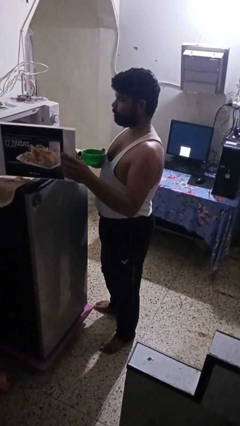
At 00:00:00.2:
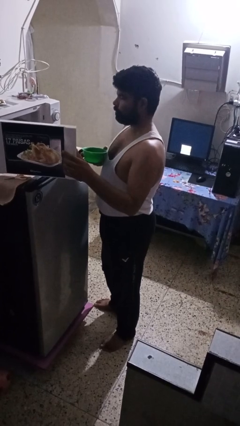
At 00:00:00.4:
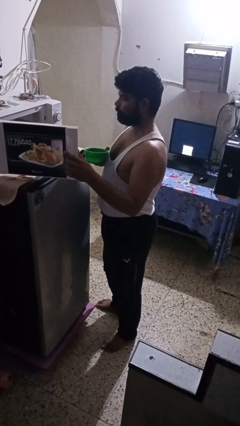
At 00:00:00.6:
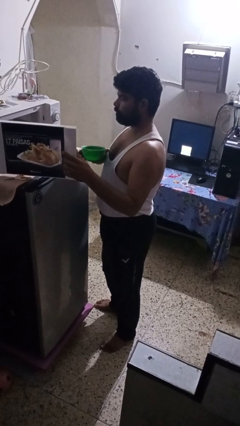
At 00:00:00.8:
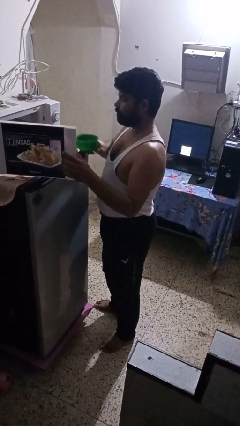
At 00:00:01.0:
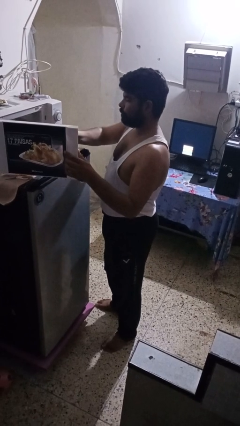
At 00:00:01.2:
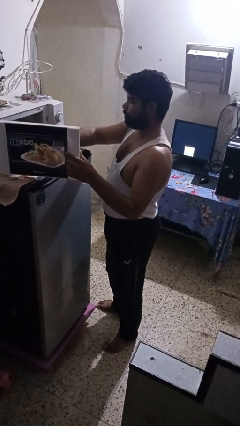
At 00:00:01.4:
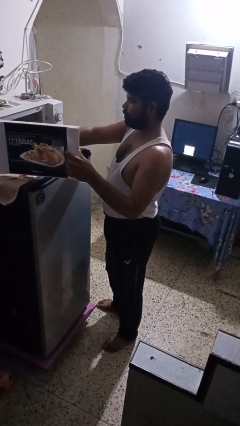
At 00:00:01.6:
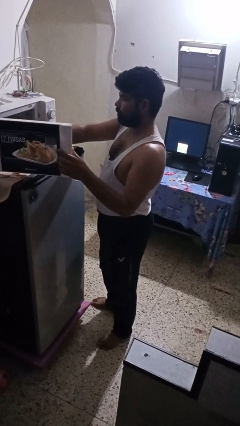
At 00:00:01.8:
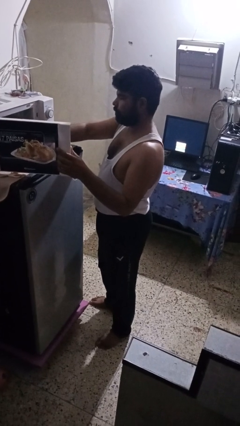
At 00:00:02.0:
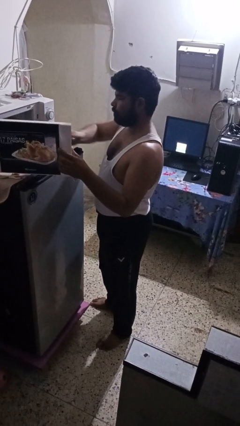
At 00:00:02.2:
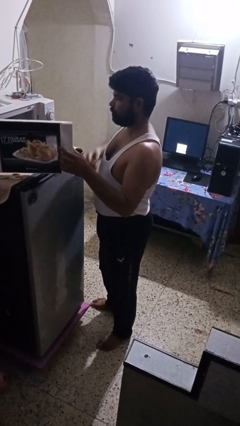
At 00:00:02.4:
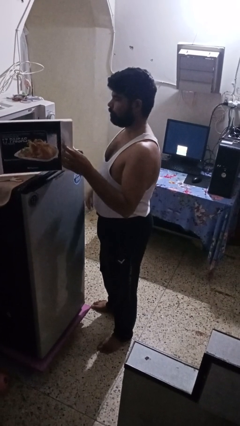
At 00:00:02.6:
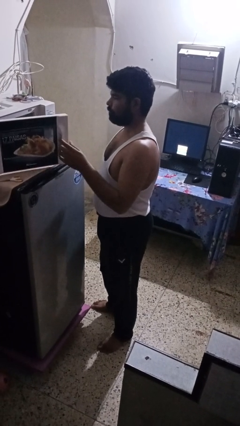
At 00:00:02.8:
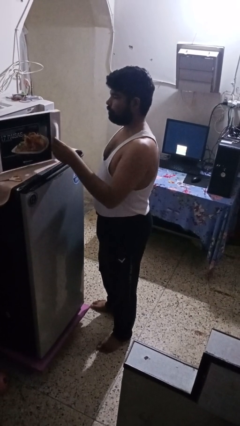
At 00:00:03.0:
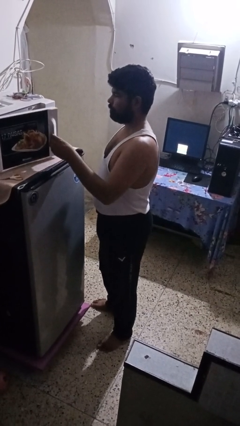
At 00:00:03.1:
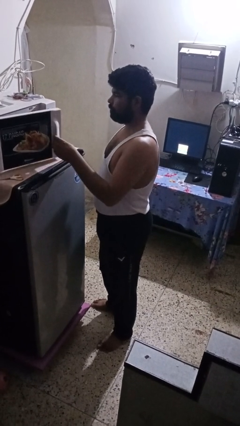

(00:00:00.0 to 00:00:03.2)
person puts object into microwave

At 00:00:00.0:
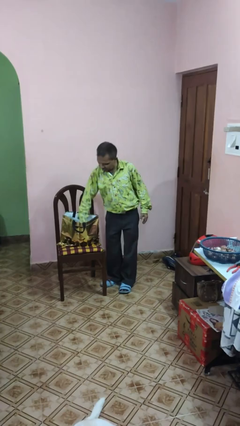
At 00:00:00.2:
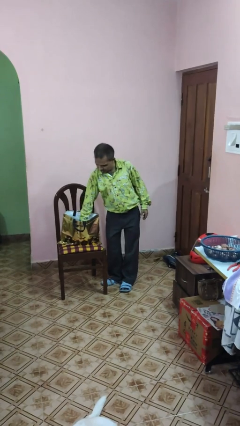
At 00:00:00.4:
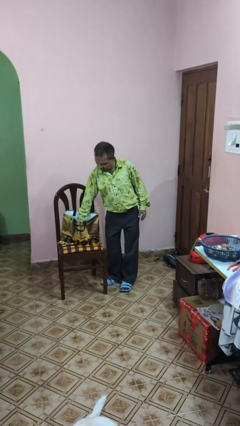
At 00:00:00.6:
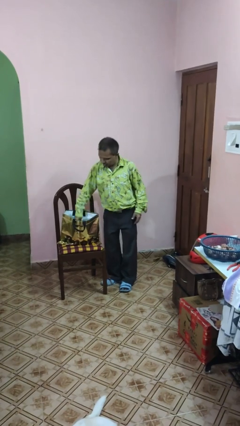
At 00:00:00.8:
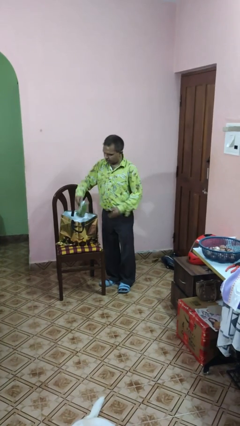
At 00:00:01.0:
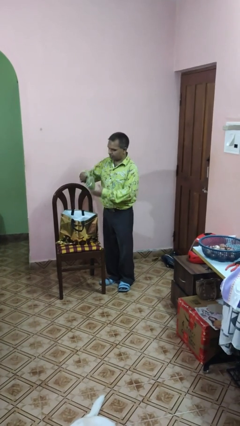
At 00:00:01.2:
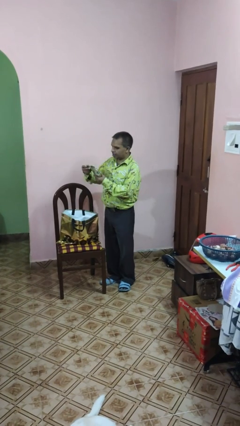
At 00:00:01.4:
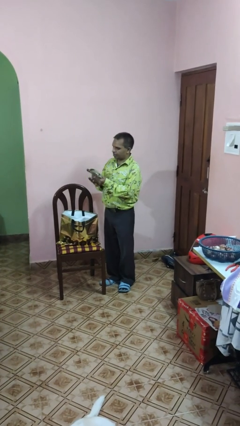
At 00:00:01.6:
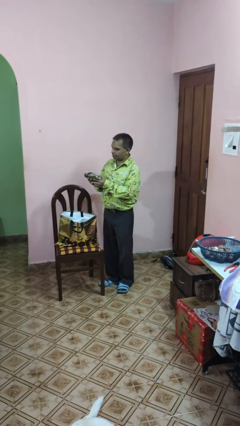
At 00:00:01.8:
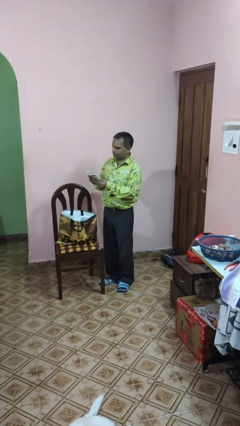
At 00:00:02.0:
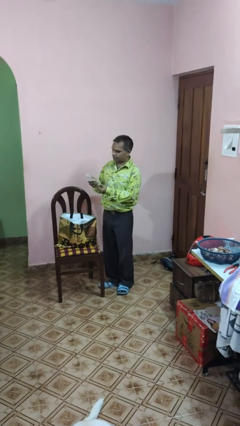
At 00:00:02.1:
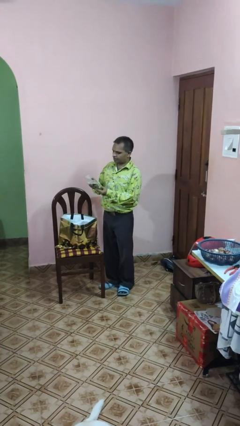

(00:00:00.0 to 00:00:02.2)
person takes object from bag

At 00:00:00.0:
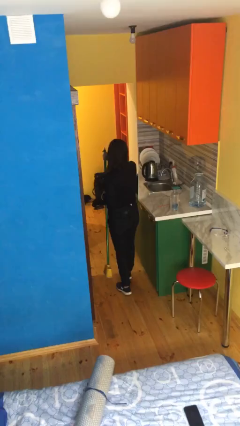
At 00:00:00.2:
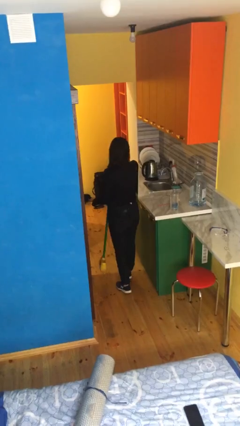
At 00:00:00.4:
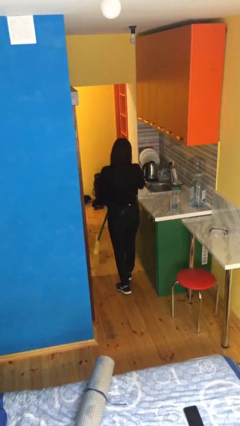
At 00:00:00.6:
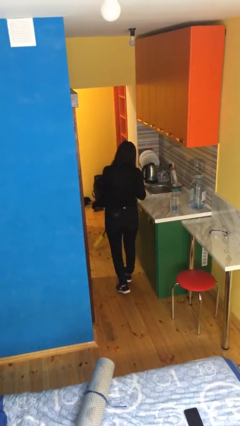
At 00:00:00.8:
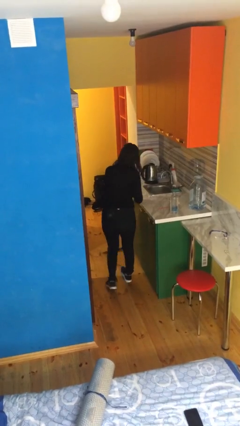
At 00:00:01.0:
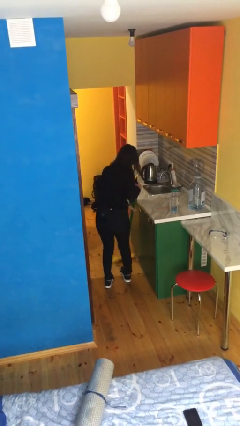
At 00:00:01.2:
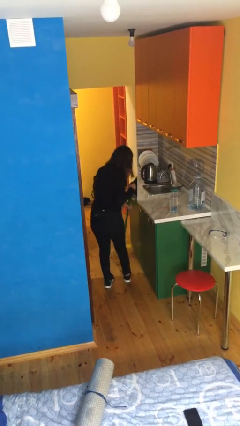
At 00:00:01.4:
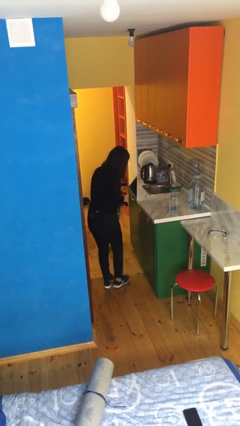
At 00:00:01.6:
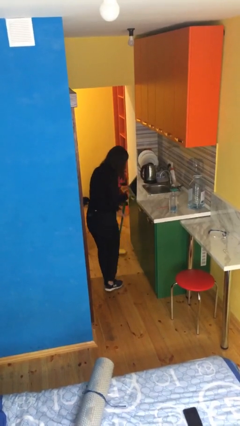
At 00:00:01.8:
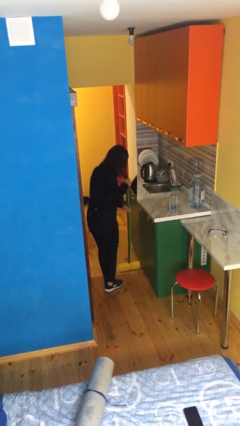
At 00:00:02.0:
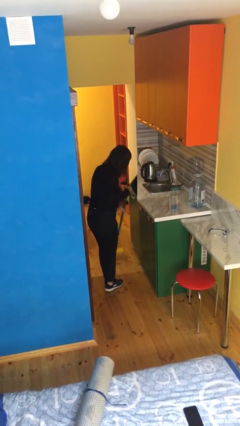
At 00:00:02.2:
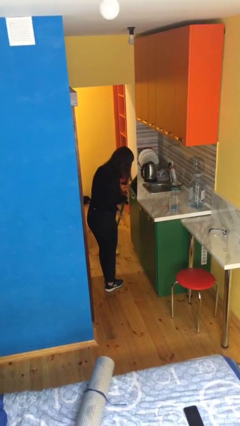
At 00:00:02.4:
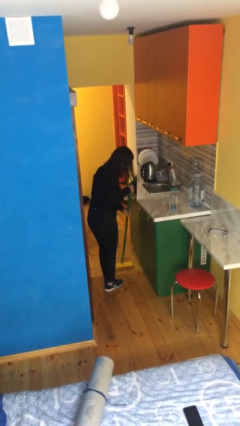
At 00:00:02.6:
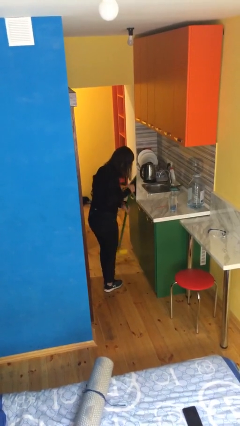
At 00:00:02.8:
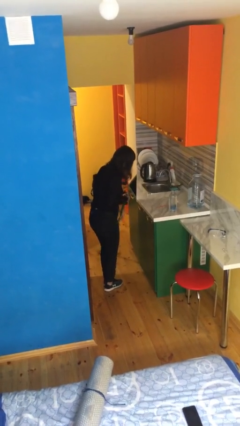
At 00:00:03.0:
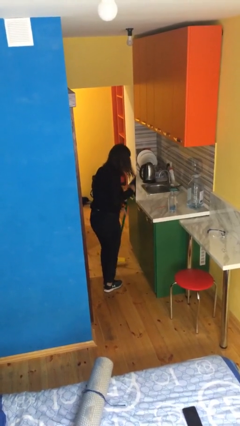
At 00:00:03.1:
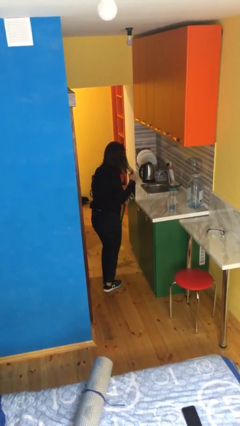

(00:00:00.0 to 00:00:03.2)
person sweeps floor

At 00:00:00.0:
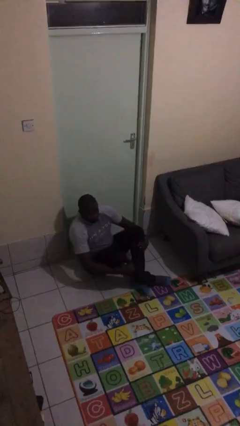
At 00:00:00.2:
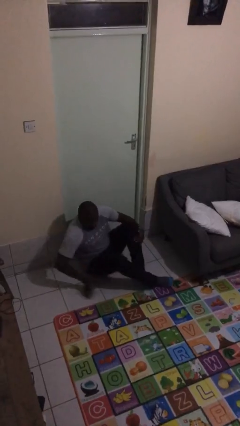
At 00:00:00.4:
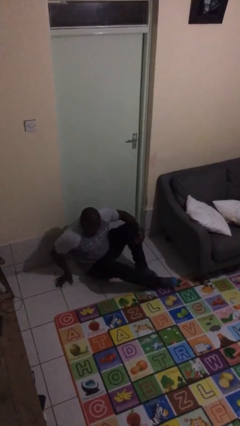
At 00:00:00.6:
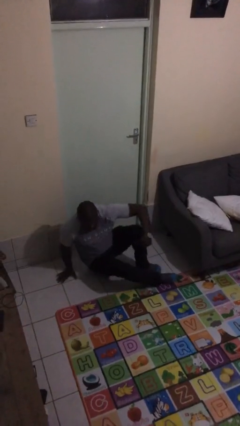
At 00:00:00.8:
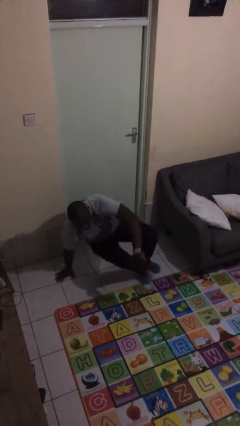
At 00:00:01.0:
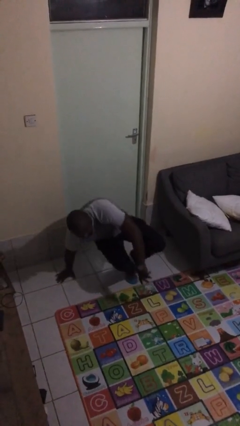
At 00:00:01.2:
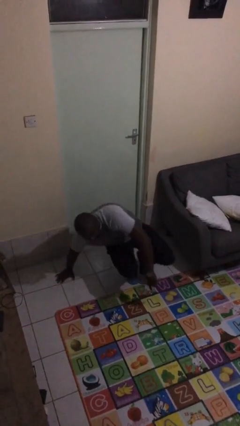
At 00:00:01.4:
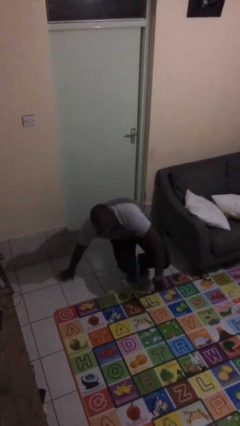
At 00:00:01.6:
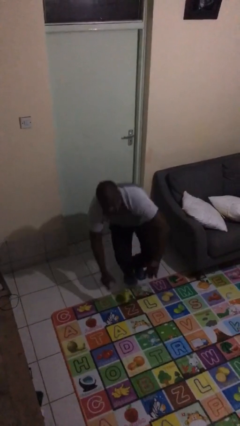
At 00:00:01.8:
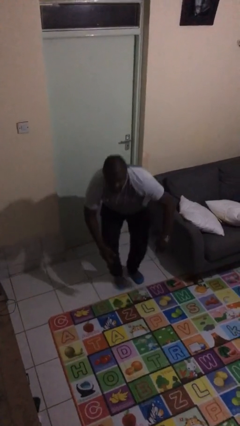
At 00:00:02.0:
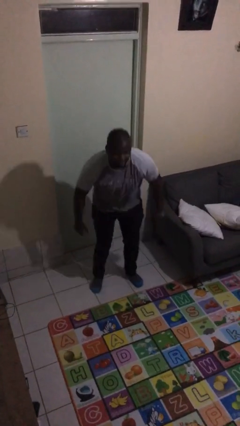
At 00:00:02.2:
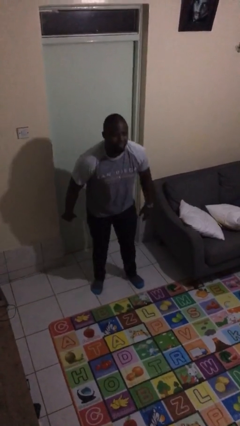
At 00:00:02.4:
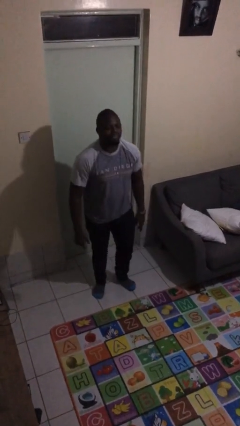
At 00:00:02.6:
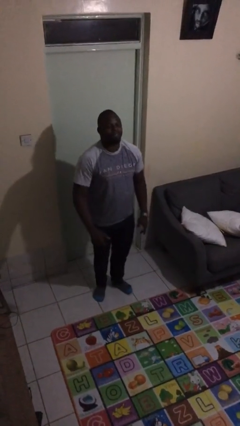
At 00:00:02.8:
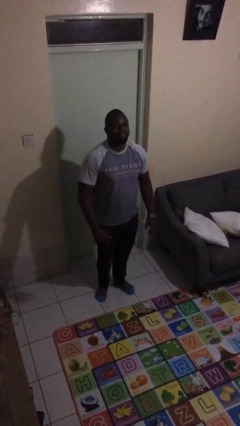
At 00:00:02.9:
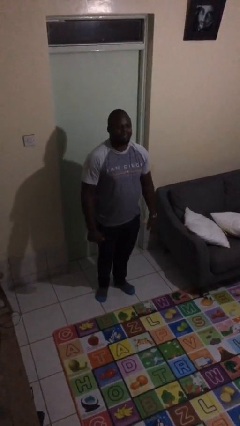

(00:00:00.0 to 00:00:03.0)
person stands up from floor

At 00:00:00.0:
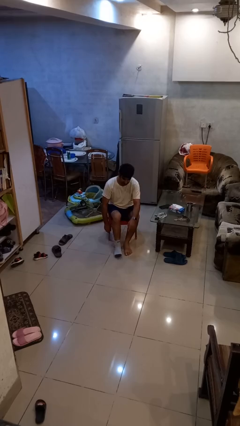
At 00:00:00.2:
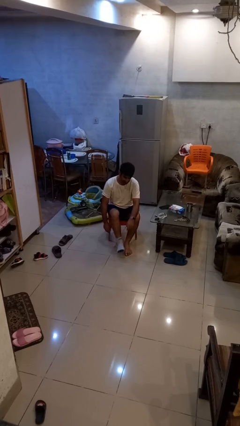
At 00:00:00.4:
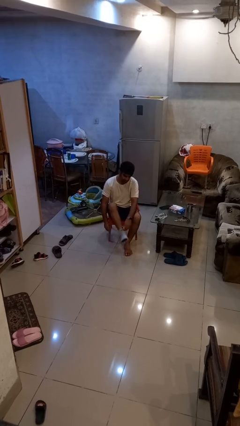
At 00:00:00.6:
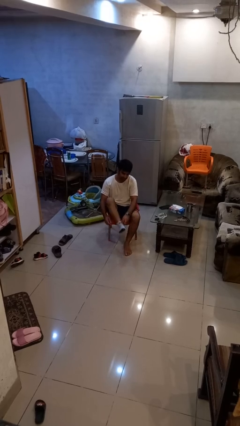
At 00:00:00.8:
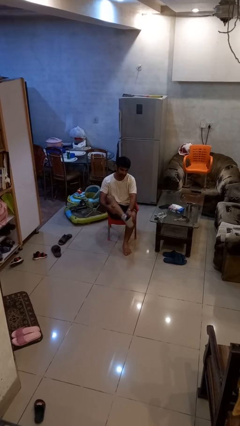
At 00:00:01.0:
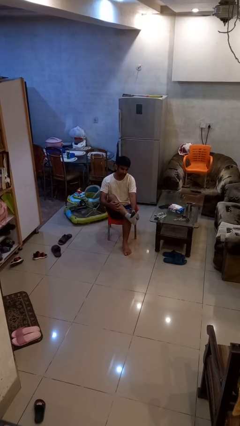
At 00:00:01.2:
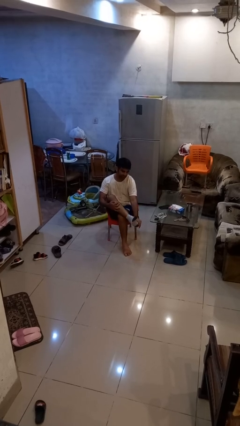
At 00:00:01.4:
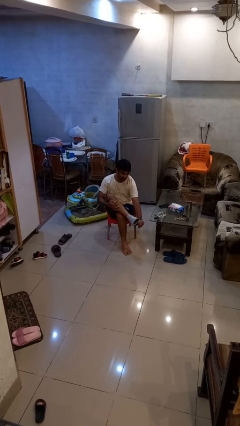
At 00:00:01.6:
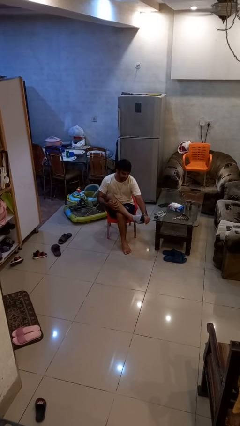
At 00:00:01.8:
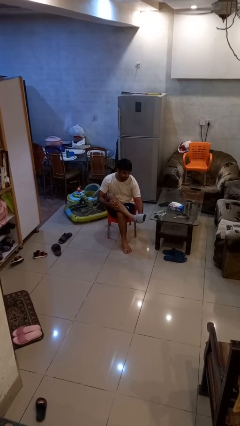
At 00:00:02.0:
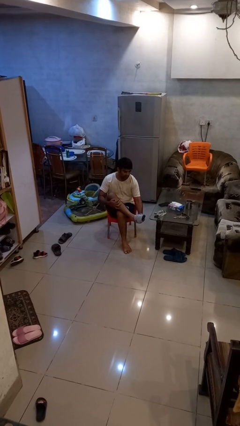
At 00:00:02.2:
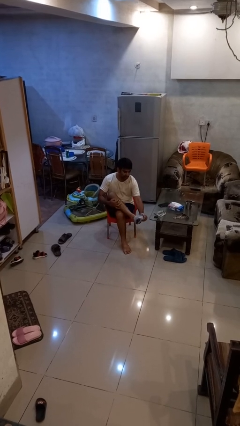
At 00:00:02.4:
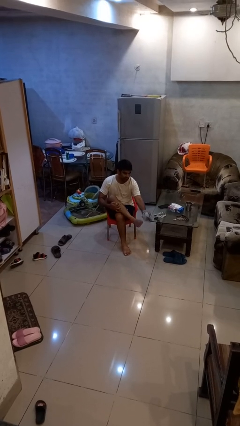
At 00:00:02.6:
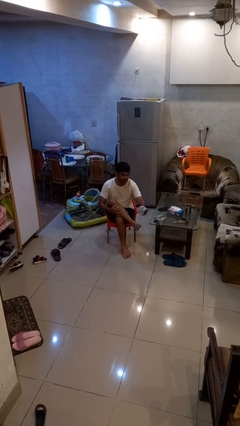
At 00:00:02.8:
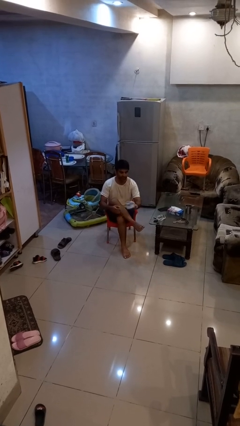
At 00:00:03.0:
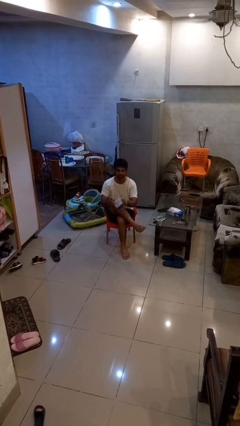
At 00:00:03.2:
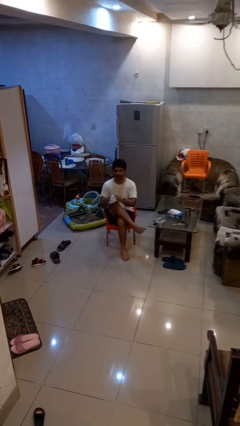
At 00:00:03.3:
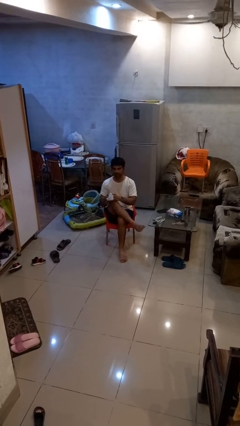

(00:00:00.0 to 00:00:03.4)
person takes off socks

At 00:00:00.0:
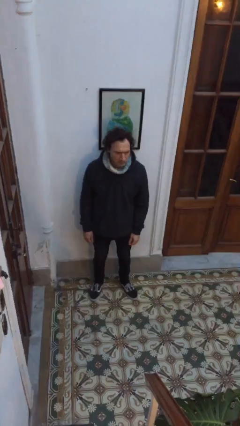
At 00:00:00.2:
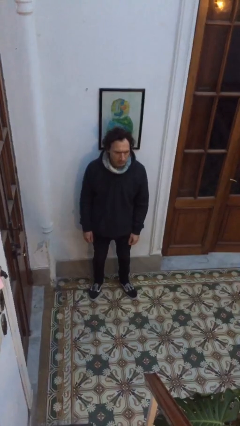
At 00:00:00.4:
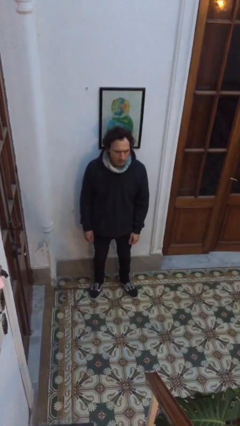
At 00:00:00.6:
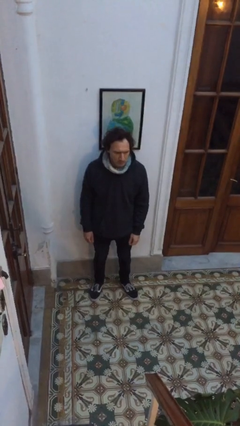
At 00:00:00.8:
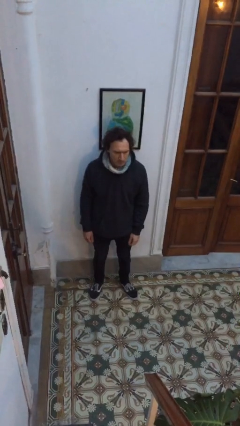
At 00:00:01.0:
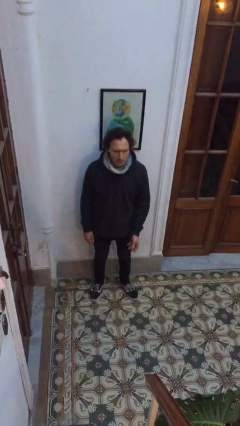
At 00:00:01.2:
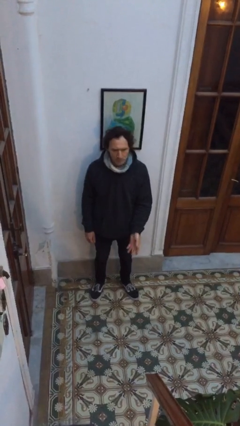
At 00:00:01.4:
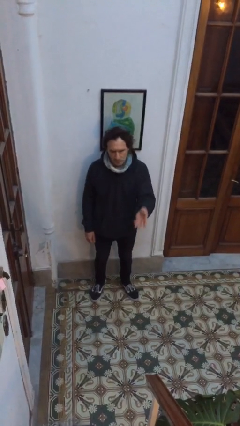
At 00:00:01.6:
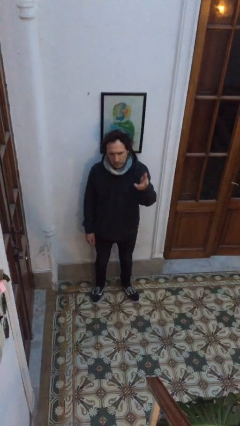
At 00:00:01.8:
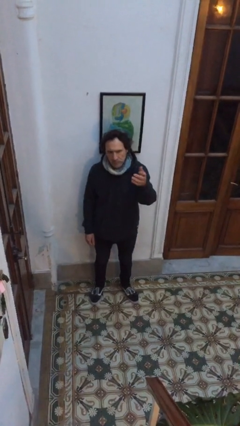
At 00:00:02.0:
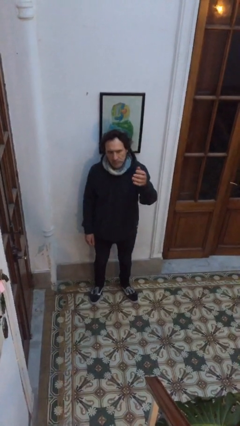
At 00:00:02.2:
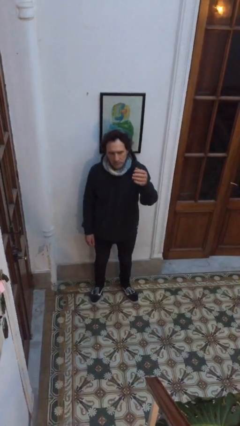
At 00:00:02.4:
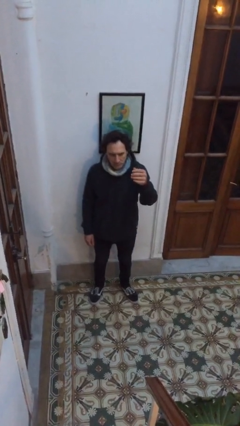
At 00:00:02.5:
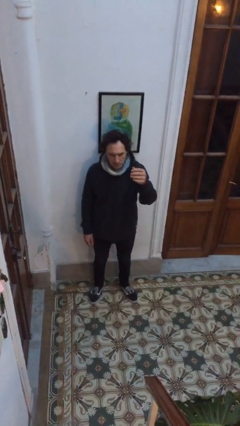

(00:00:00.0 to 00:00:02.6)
person gestures swipe up
